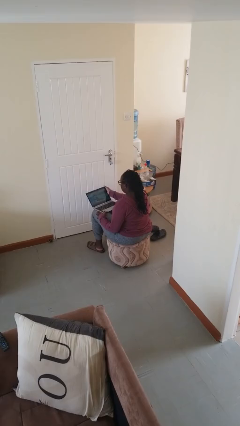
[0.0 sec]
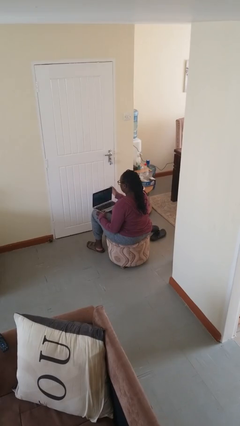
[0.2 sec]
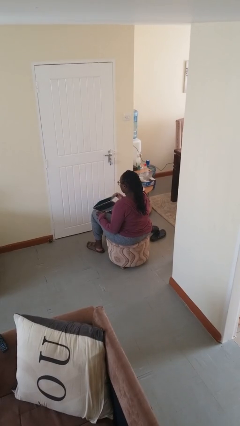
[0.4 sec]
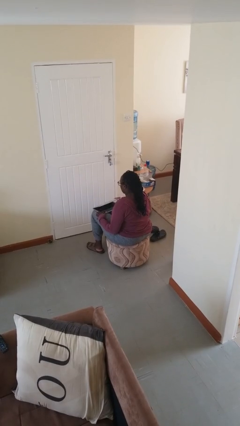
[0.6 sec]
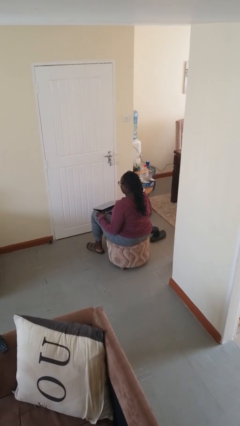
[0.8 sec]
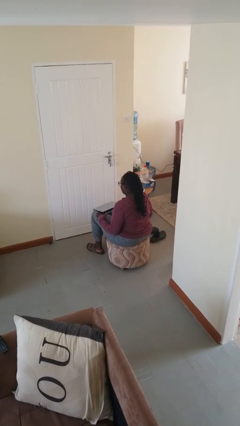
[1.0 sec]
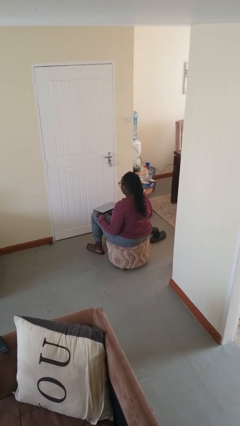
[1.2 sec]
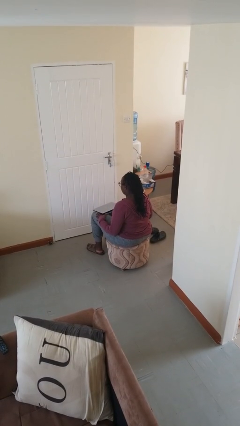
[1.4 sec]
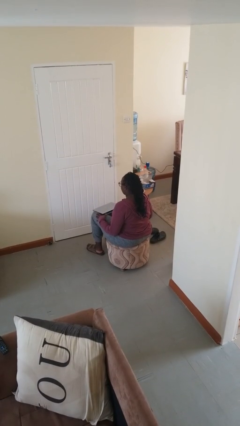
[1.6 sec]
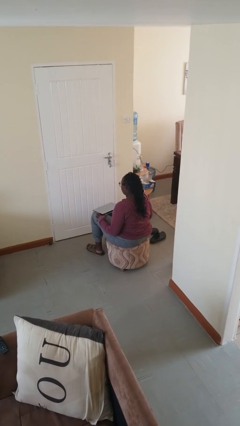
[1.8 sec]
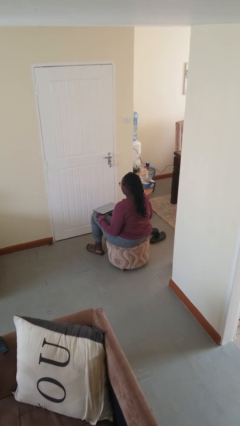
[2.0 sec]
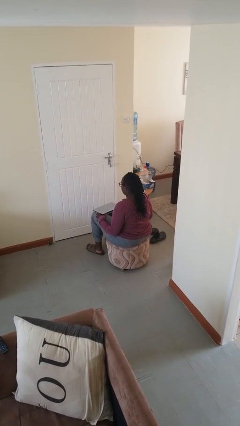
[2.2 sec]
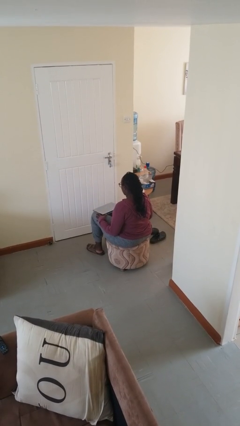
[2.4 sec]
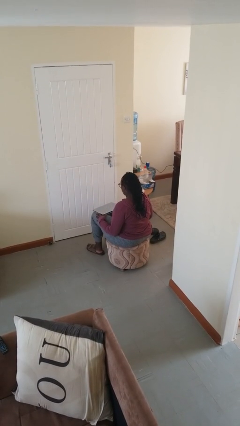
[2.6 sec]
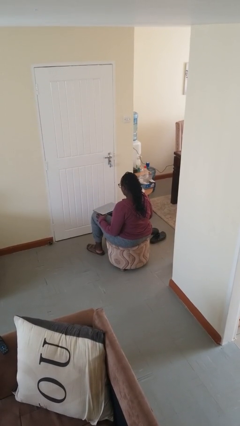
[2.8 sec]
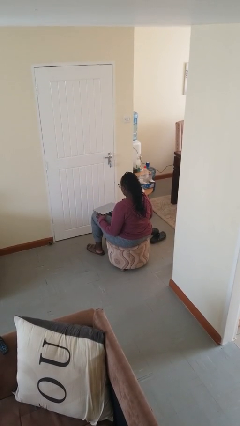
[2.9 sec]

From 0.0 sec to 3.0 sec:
person closes laptop

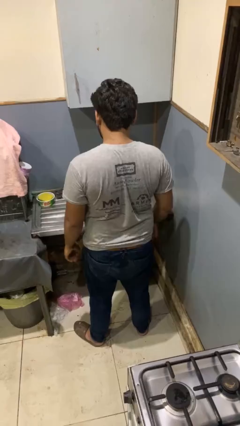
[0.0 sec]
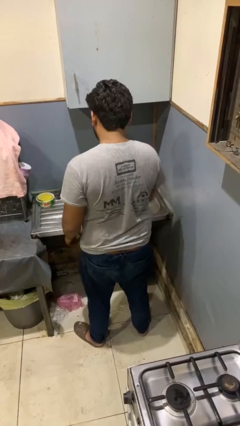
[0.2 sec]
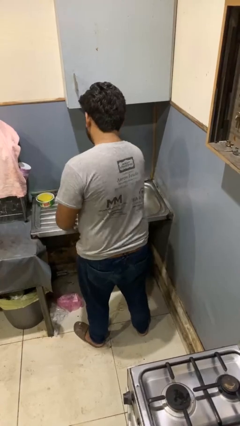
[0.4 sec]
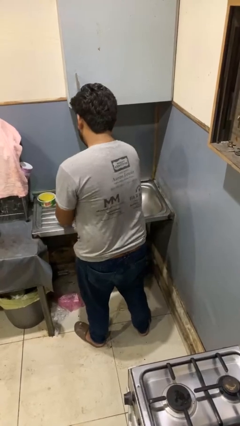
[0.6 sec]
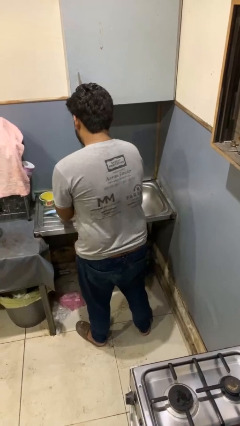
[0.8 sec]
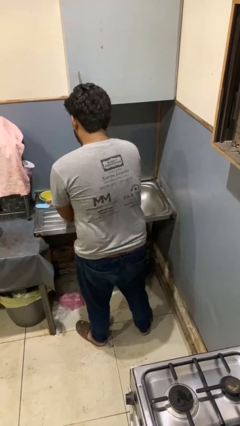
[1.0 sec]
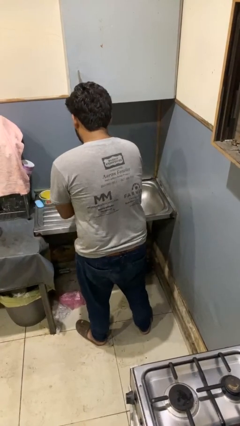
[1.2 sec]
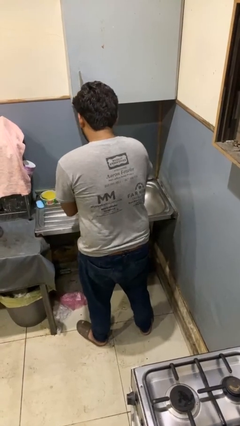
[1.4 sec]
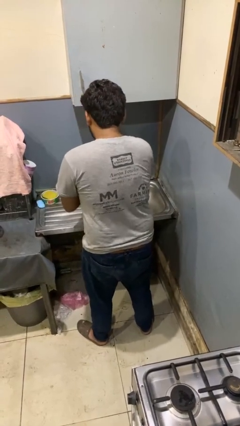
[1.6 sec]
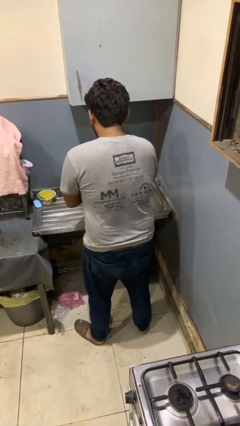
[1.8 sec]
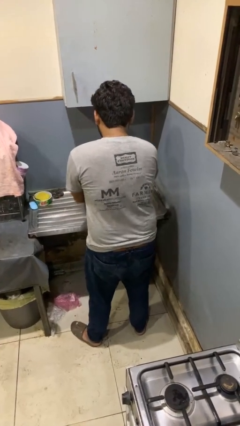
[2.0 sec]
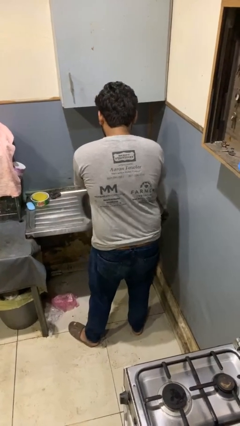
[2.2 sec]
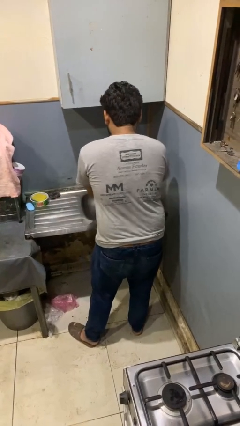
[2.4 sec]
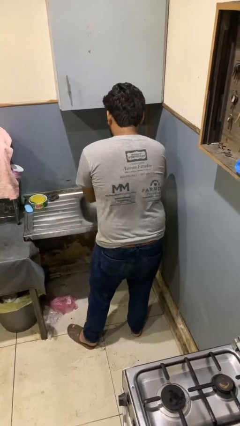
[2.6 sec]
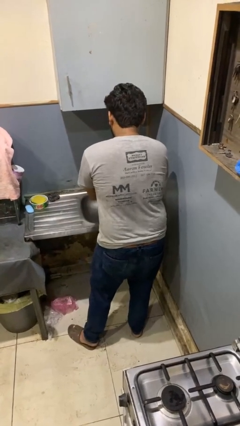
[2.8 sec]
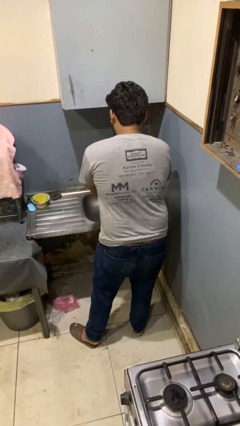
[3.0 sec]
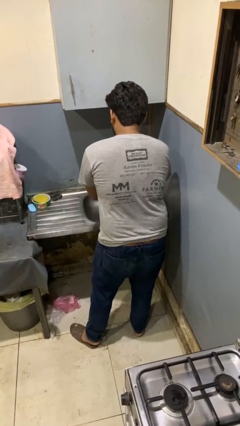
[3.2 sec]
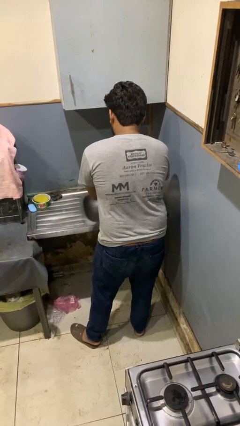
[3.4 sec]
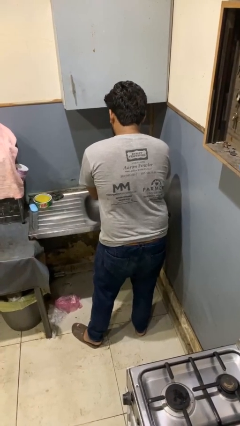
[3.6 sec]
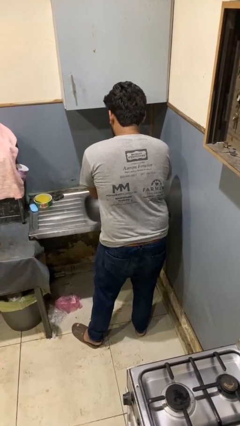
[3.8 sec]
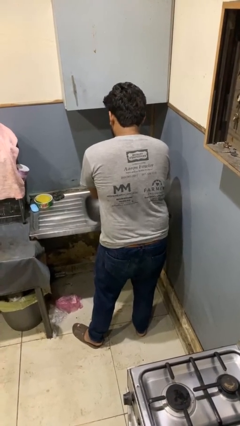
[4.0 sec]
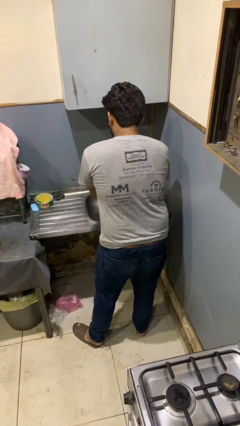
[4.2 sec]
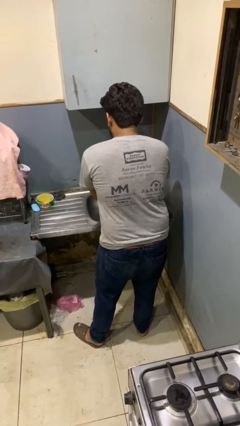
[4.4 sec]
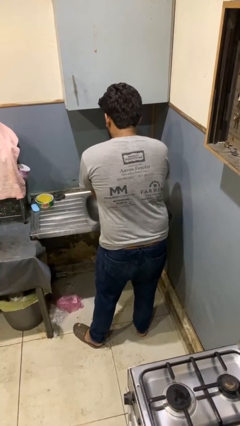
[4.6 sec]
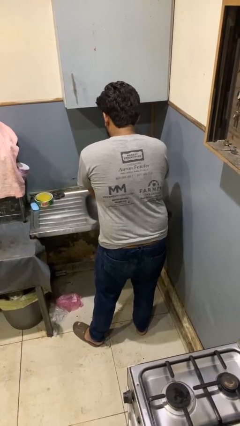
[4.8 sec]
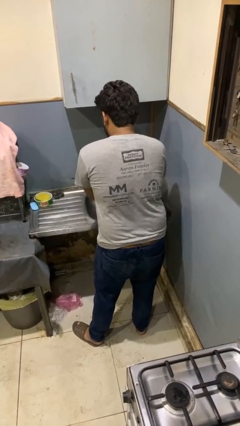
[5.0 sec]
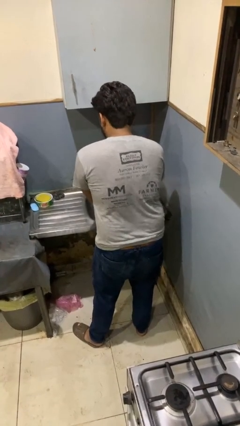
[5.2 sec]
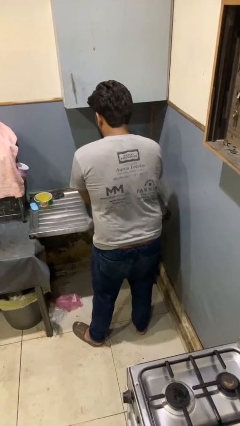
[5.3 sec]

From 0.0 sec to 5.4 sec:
person washes hands

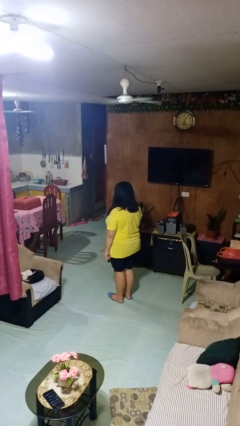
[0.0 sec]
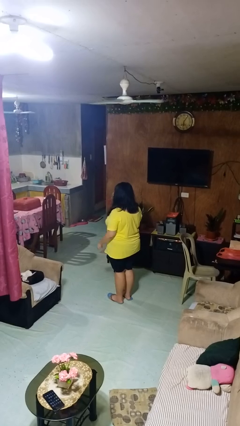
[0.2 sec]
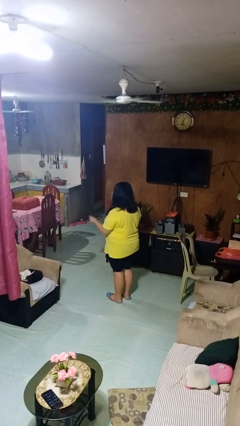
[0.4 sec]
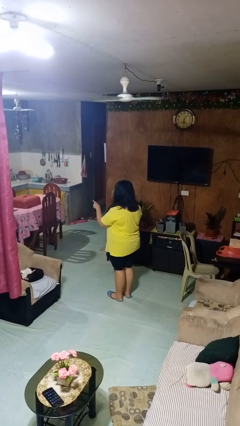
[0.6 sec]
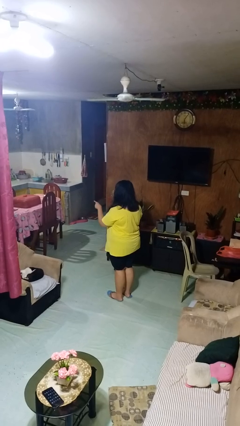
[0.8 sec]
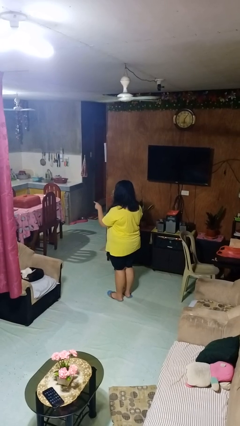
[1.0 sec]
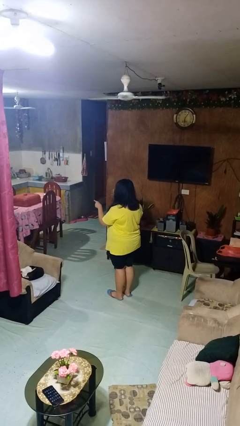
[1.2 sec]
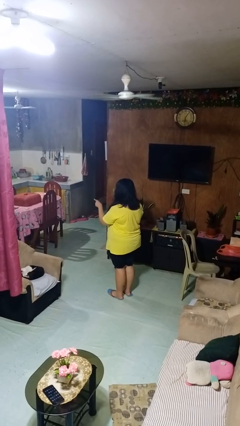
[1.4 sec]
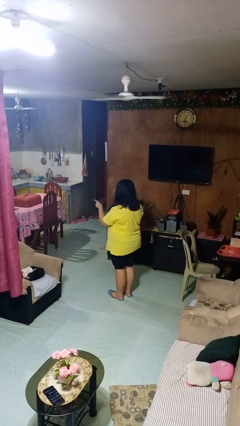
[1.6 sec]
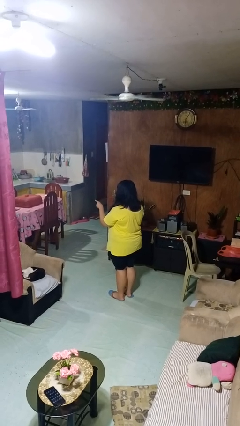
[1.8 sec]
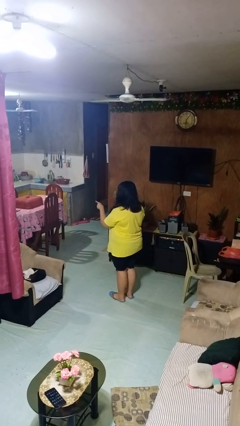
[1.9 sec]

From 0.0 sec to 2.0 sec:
person points at person

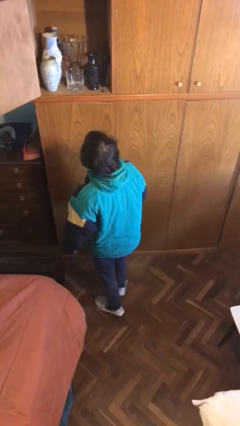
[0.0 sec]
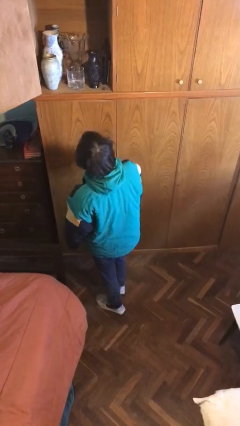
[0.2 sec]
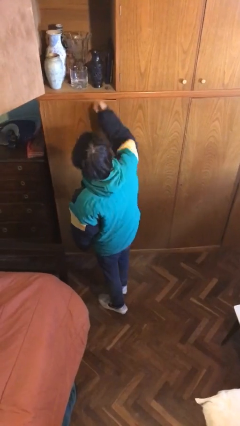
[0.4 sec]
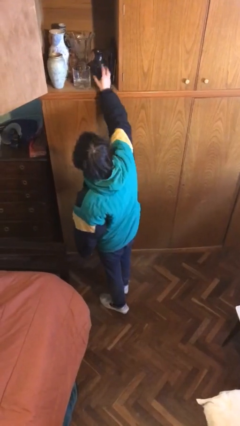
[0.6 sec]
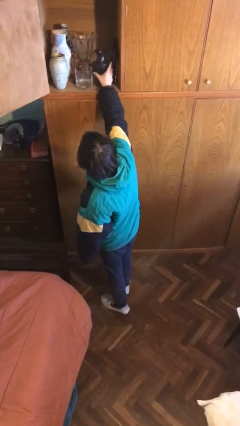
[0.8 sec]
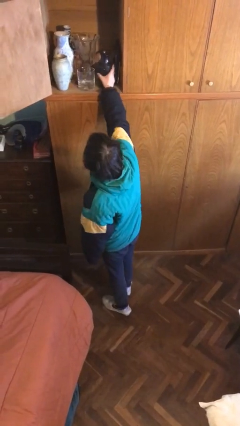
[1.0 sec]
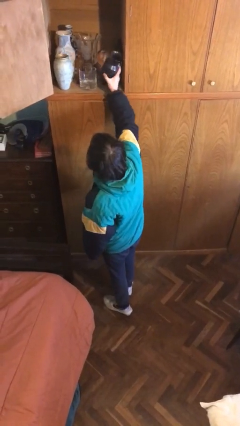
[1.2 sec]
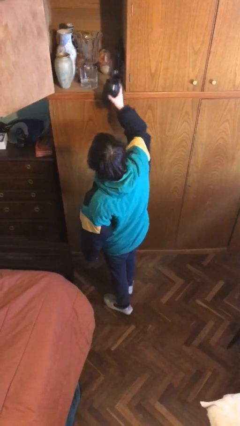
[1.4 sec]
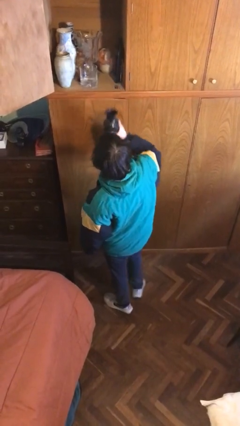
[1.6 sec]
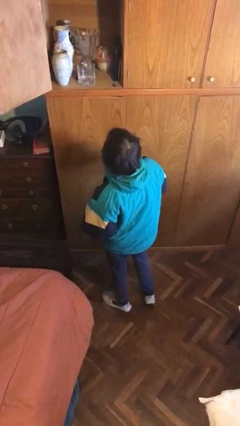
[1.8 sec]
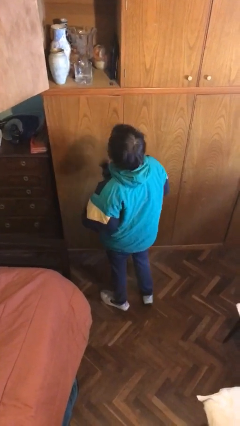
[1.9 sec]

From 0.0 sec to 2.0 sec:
person picks up object from cabinet

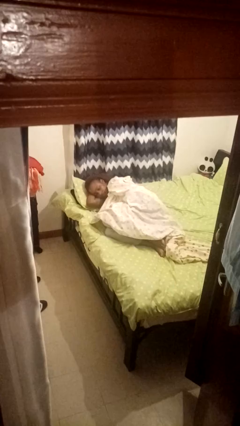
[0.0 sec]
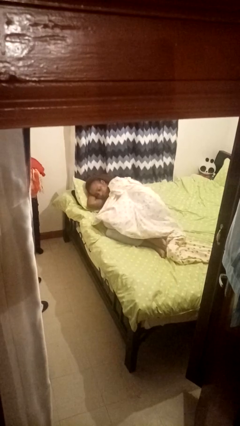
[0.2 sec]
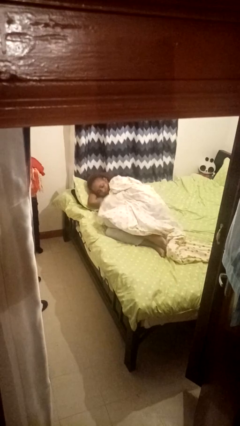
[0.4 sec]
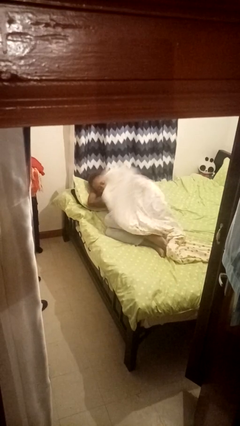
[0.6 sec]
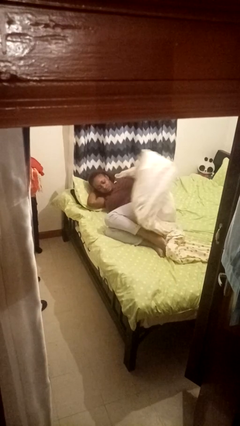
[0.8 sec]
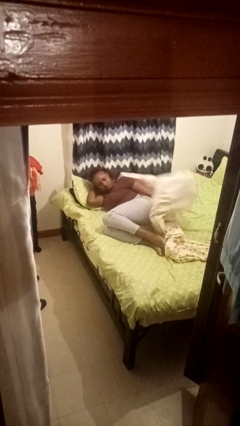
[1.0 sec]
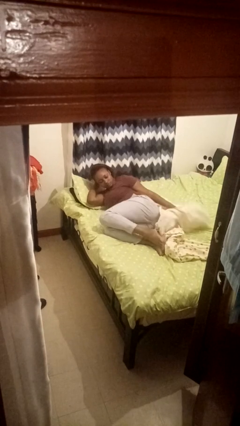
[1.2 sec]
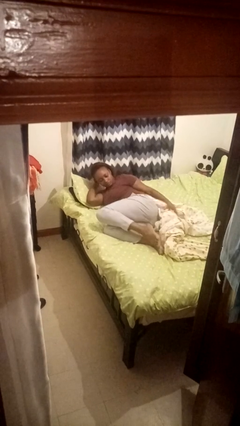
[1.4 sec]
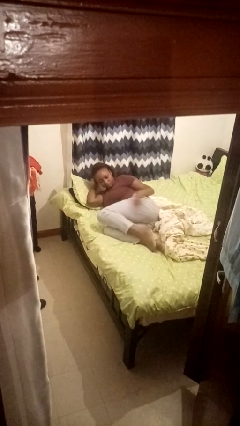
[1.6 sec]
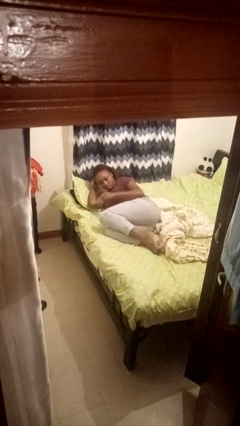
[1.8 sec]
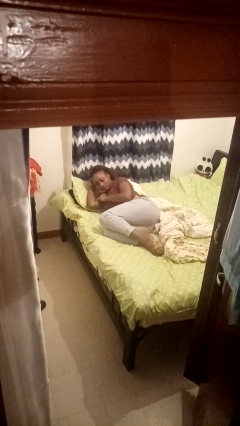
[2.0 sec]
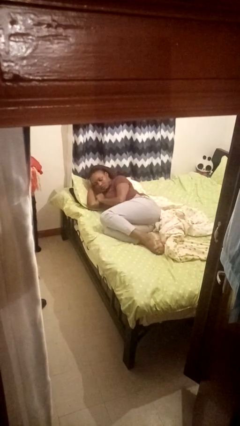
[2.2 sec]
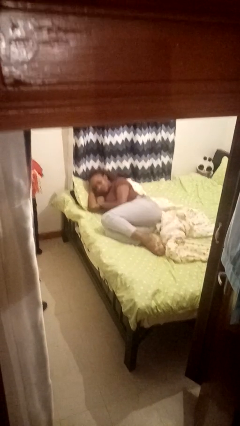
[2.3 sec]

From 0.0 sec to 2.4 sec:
person uncovers with bedsheets

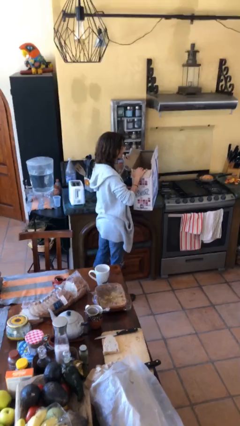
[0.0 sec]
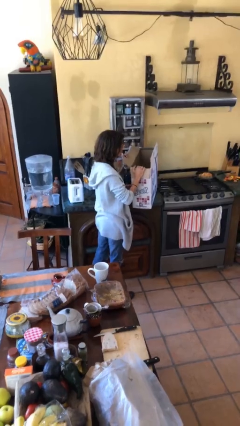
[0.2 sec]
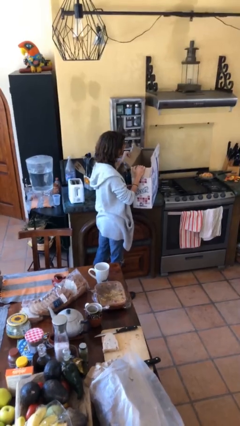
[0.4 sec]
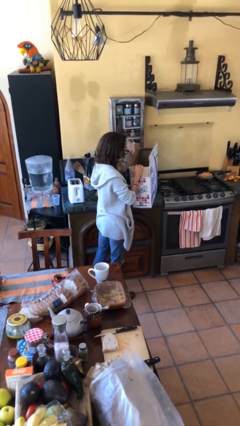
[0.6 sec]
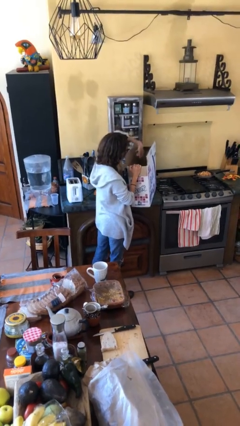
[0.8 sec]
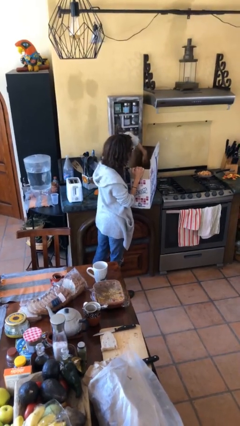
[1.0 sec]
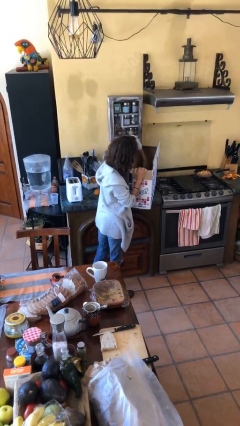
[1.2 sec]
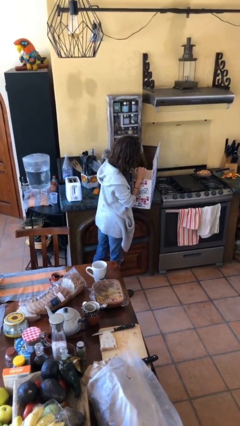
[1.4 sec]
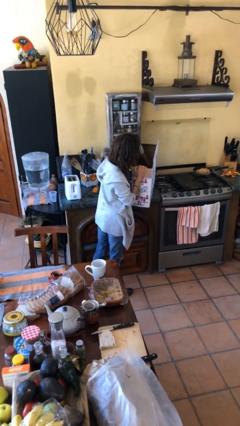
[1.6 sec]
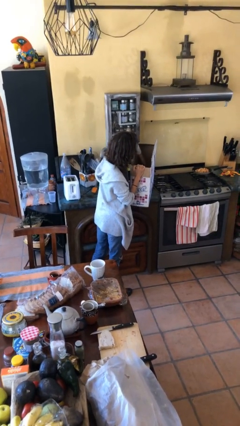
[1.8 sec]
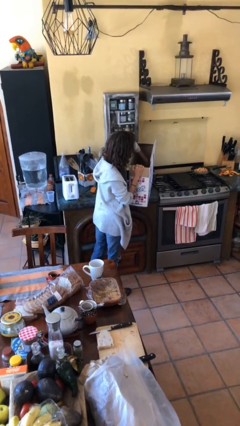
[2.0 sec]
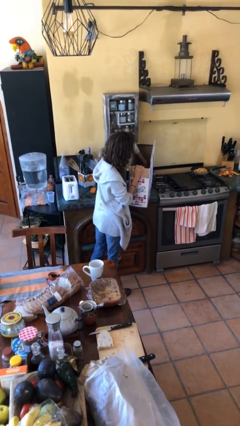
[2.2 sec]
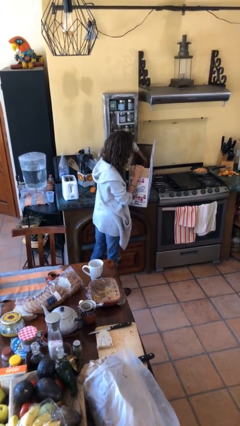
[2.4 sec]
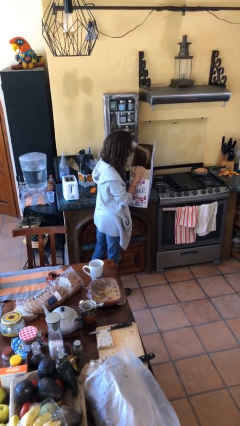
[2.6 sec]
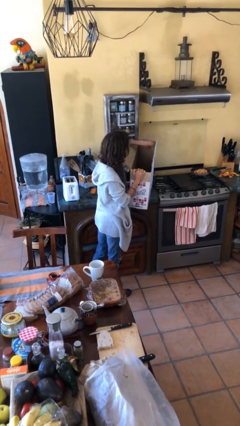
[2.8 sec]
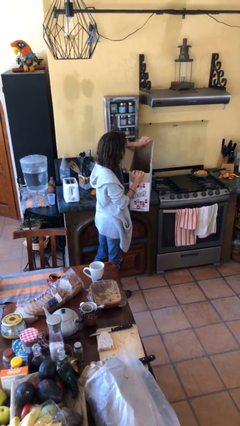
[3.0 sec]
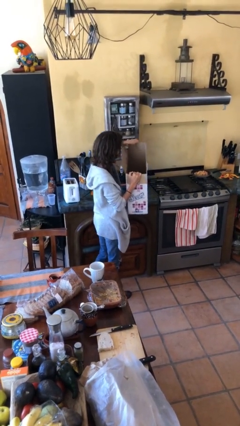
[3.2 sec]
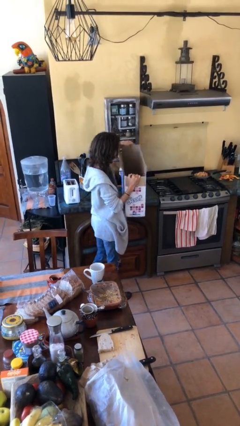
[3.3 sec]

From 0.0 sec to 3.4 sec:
person searches in box
